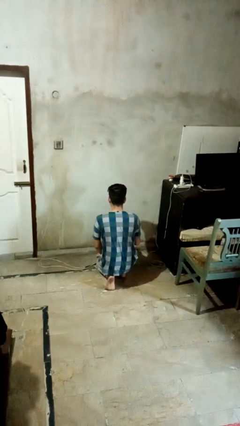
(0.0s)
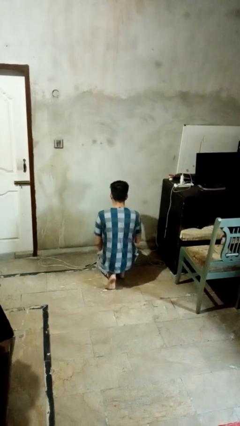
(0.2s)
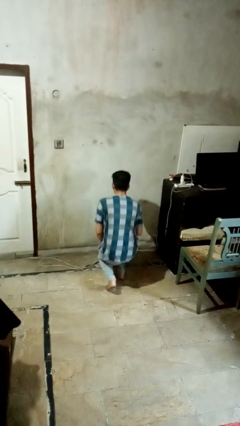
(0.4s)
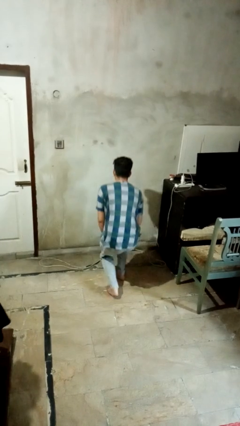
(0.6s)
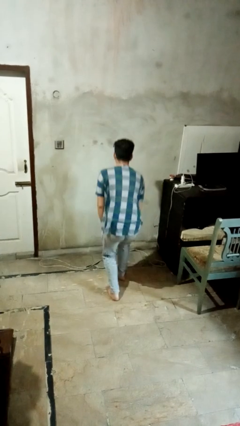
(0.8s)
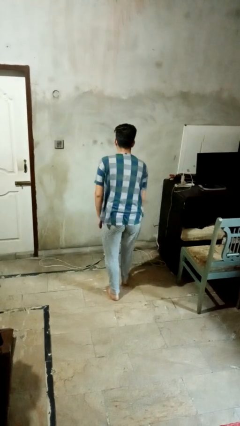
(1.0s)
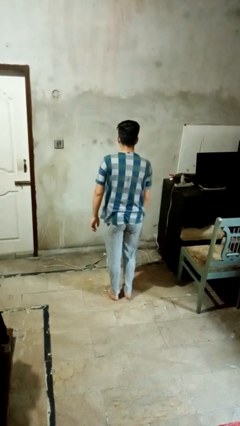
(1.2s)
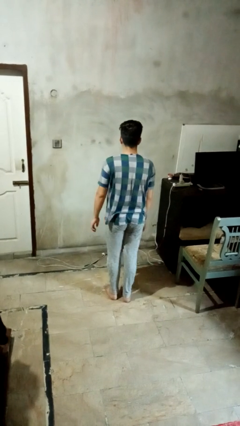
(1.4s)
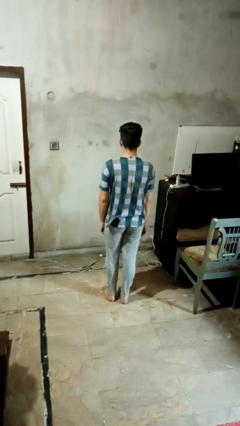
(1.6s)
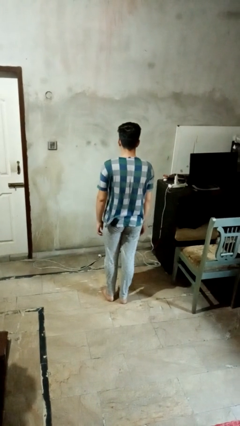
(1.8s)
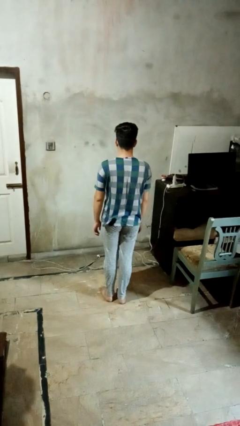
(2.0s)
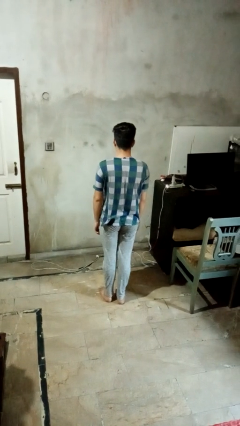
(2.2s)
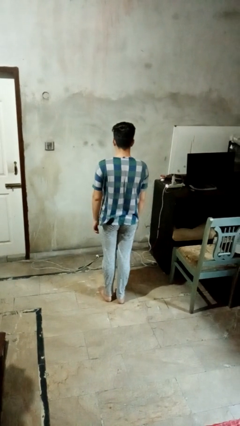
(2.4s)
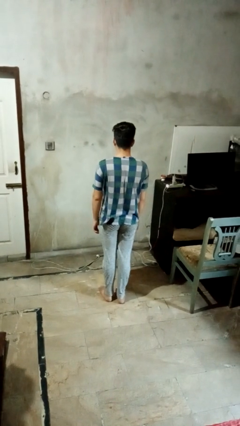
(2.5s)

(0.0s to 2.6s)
person stands up from floor

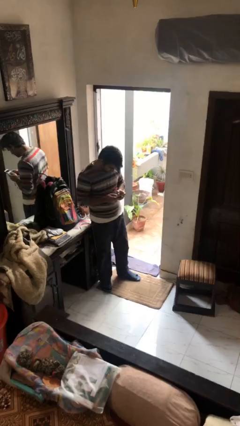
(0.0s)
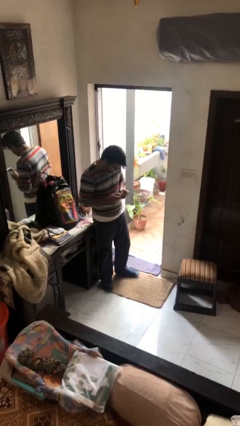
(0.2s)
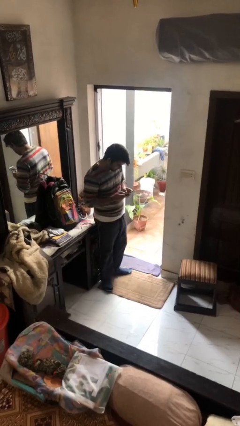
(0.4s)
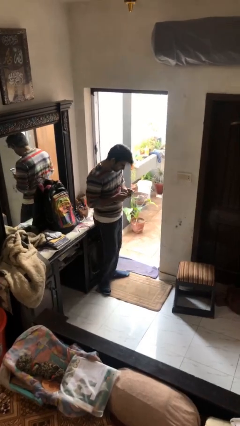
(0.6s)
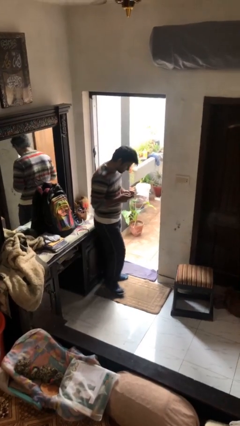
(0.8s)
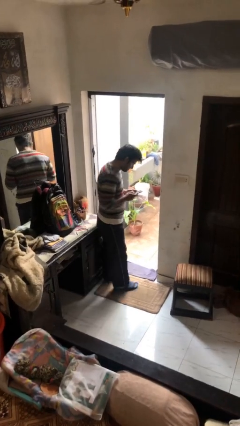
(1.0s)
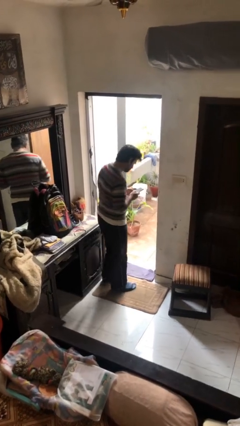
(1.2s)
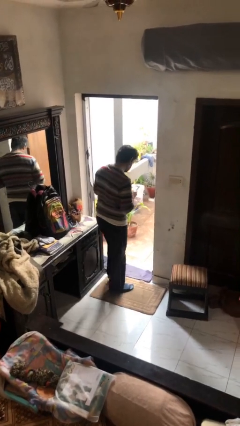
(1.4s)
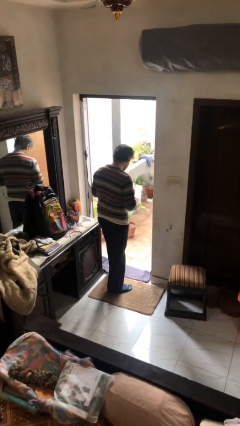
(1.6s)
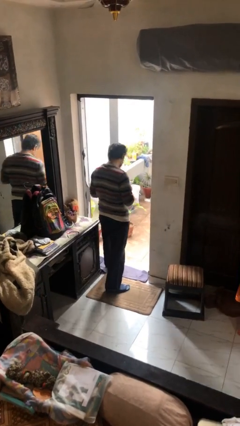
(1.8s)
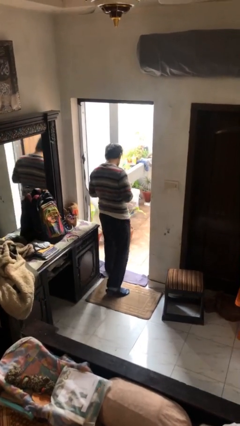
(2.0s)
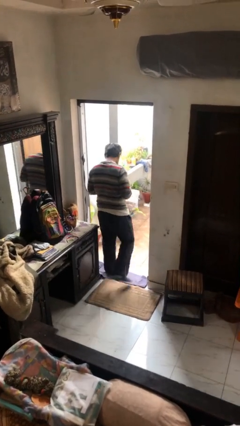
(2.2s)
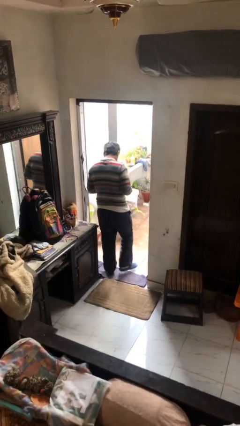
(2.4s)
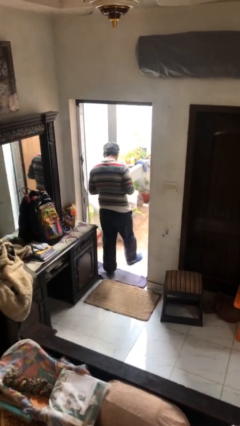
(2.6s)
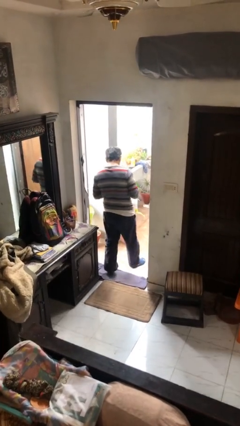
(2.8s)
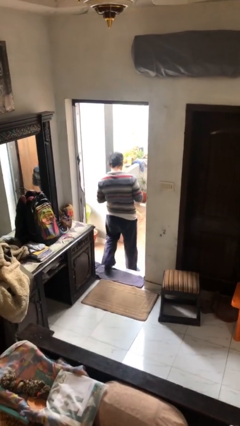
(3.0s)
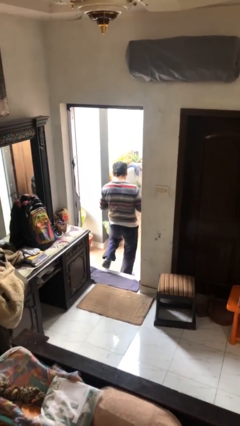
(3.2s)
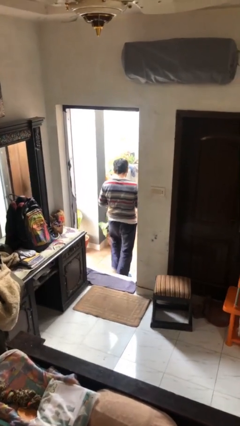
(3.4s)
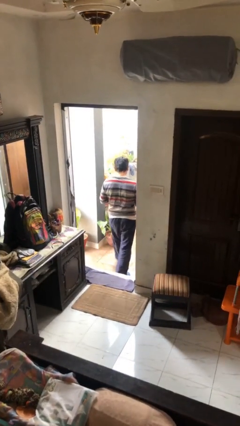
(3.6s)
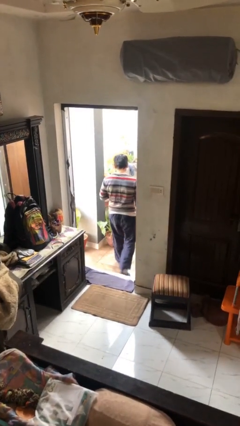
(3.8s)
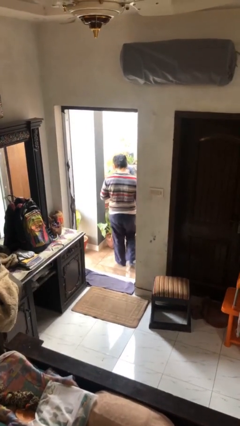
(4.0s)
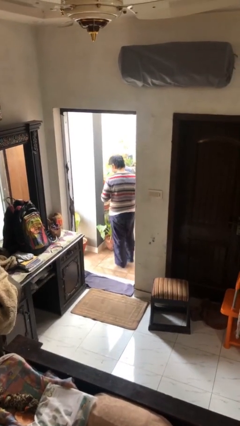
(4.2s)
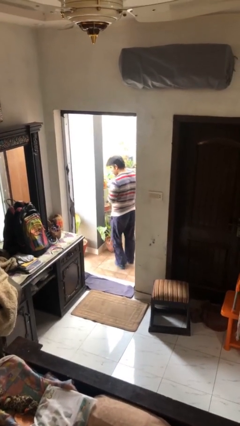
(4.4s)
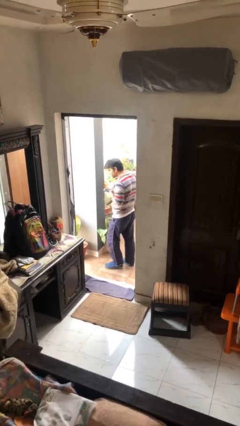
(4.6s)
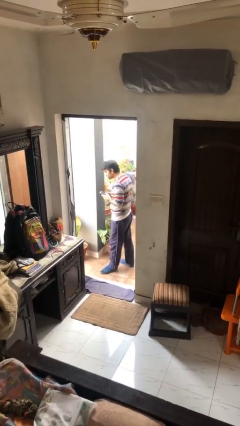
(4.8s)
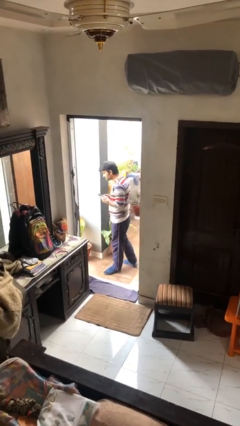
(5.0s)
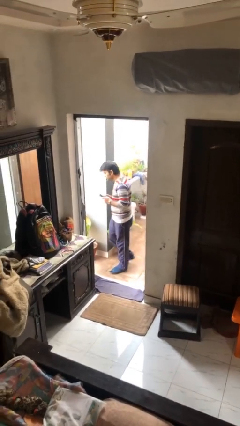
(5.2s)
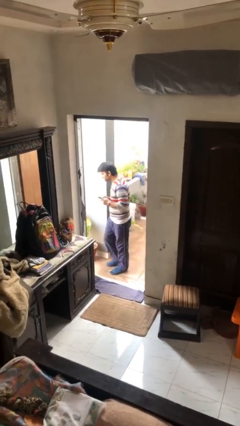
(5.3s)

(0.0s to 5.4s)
person exits scene through structure

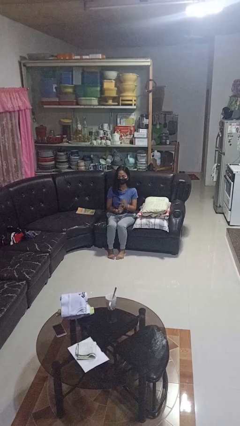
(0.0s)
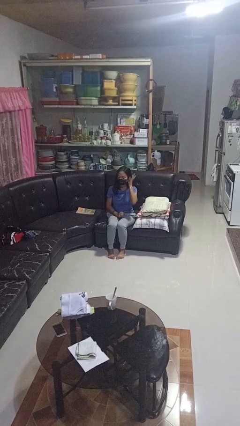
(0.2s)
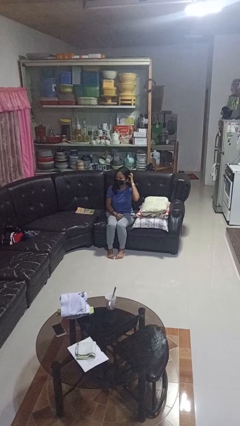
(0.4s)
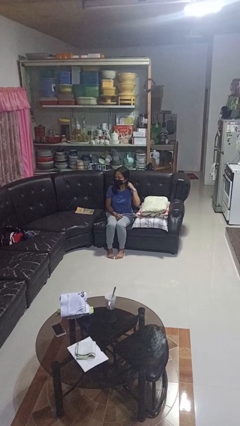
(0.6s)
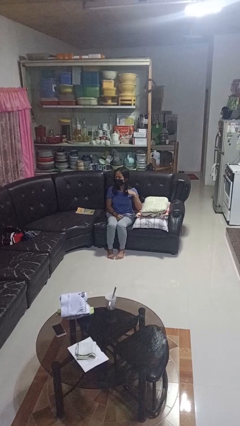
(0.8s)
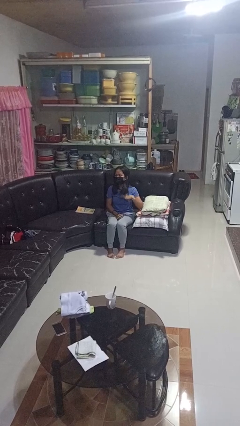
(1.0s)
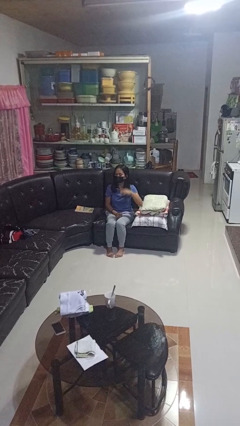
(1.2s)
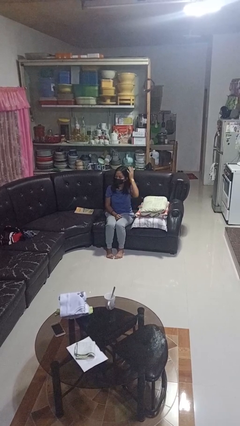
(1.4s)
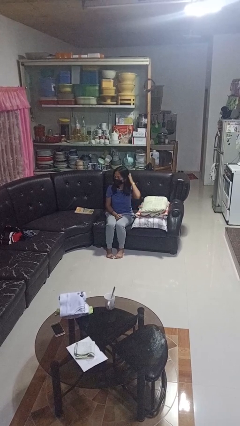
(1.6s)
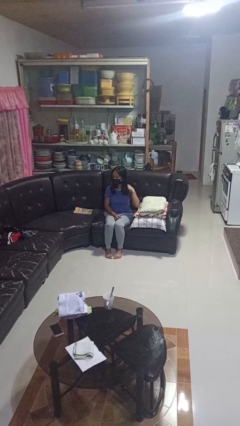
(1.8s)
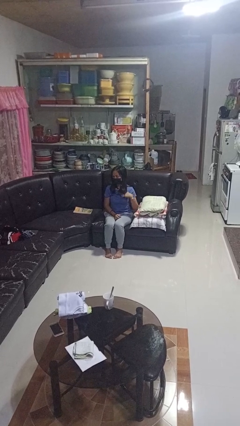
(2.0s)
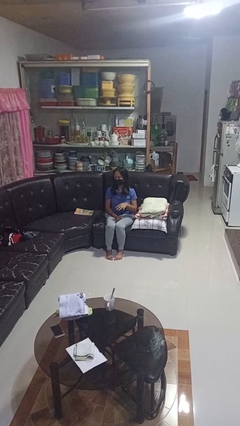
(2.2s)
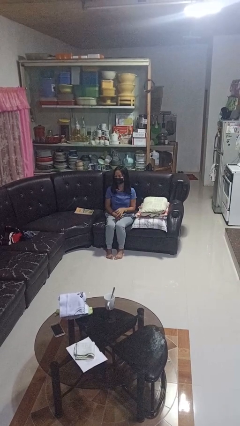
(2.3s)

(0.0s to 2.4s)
person strokes hair

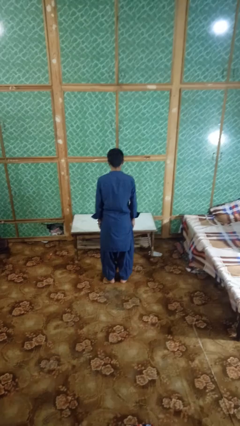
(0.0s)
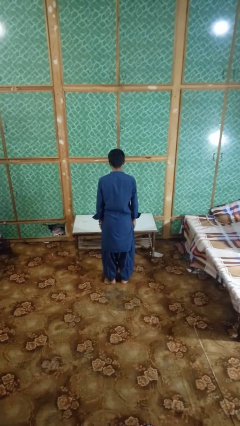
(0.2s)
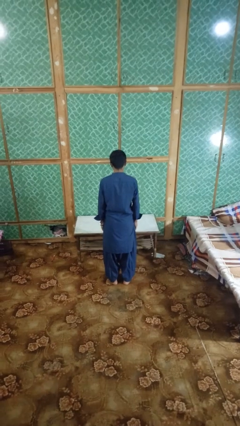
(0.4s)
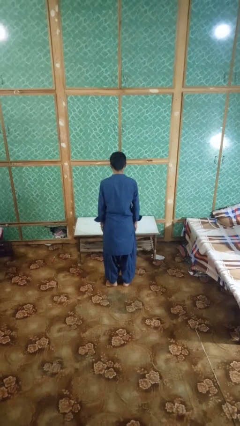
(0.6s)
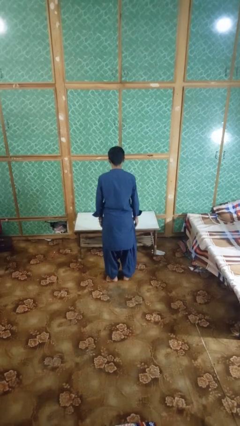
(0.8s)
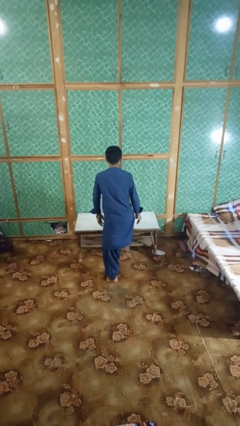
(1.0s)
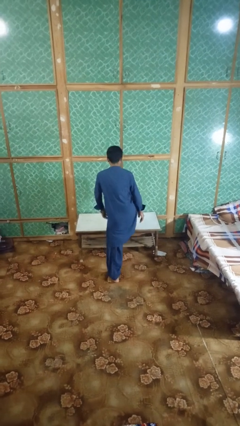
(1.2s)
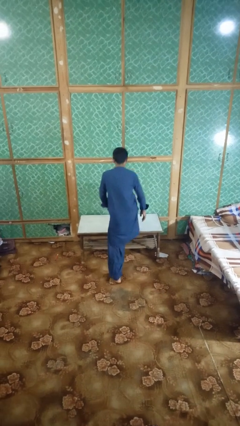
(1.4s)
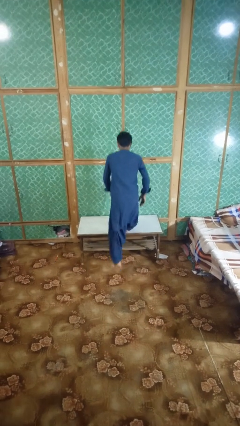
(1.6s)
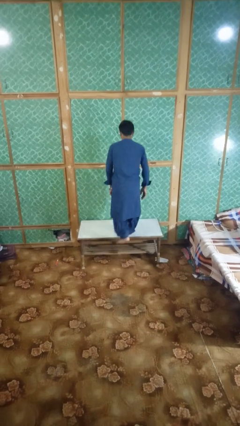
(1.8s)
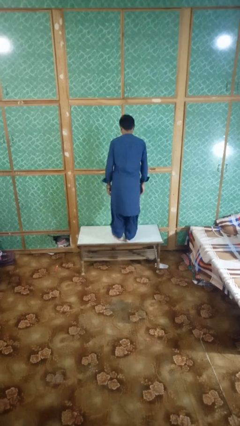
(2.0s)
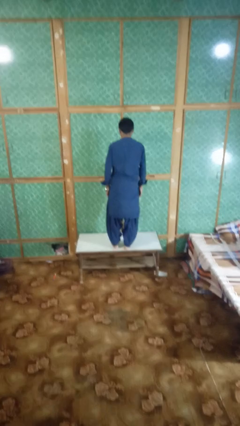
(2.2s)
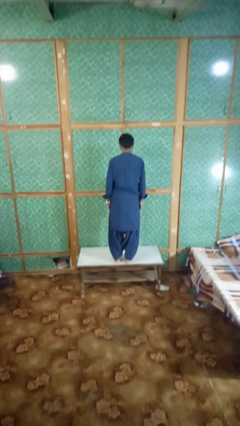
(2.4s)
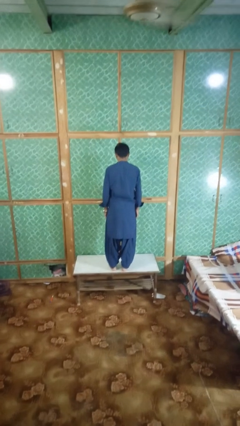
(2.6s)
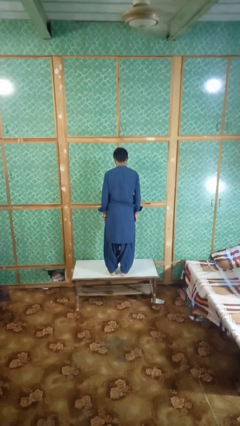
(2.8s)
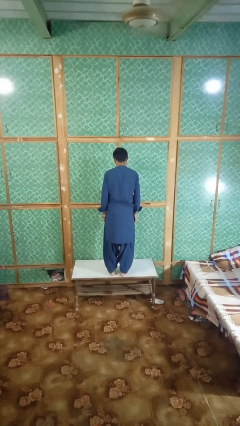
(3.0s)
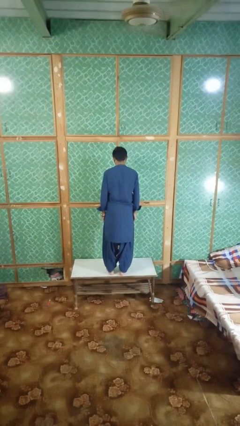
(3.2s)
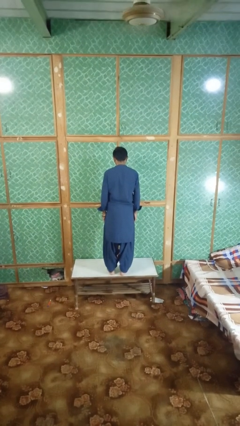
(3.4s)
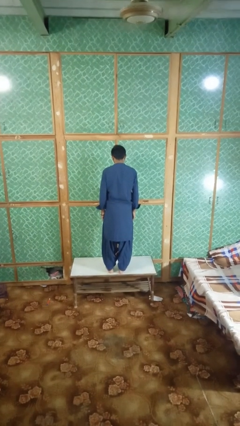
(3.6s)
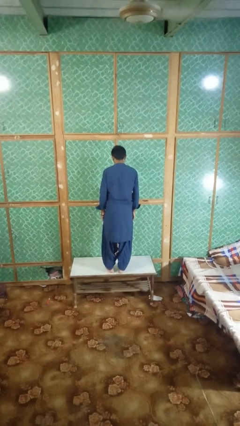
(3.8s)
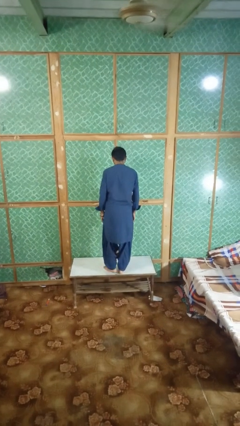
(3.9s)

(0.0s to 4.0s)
person climbs on table

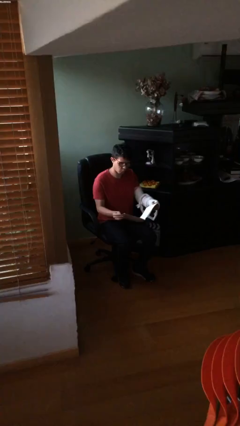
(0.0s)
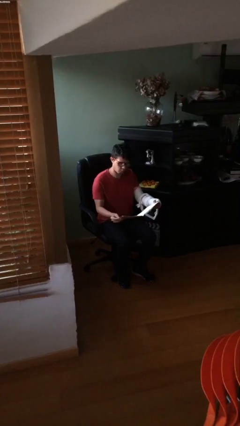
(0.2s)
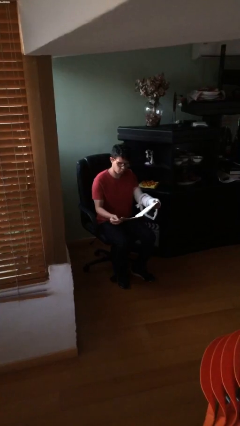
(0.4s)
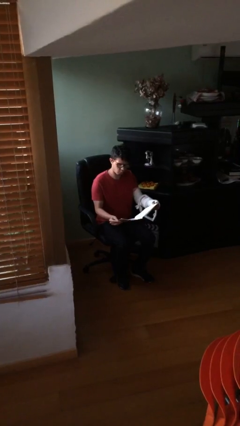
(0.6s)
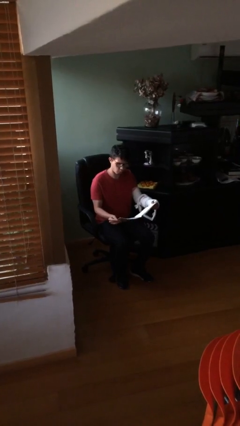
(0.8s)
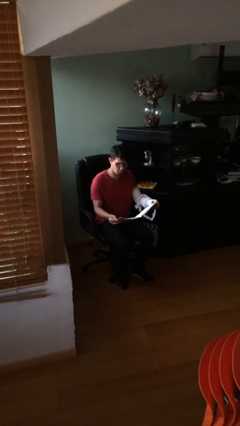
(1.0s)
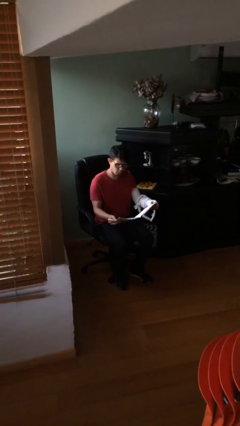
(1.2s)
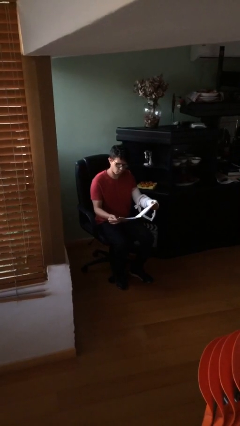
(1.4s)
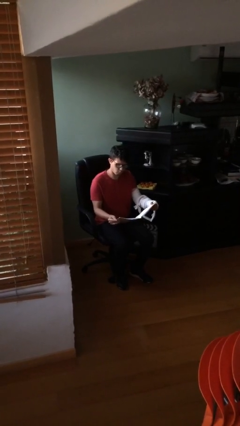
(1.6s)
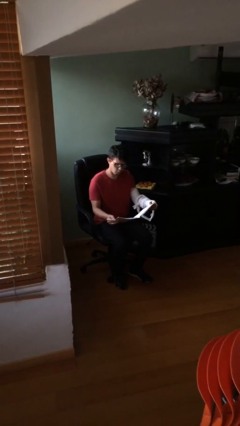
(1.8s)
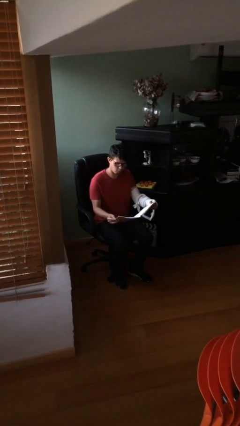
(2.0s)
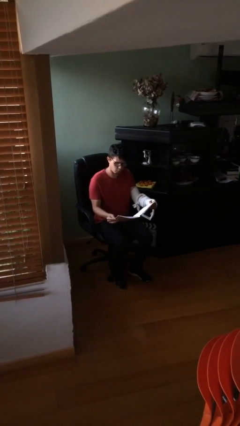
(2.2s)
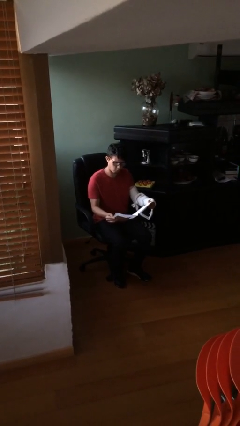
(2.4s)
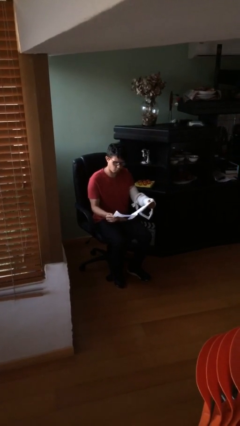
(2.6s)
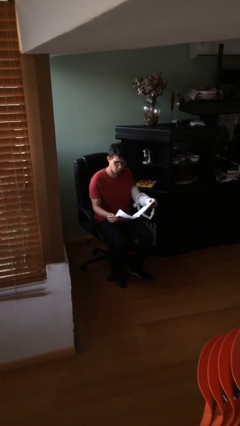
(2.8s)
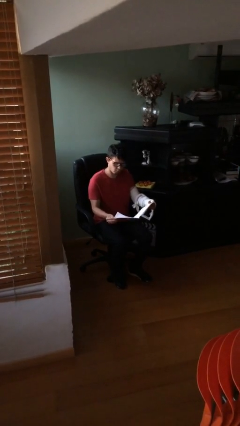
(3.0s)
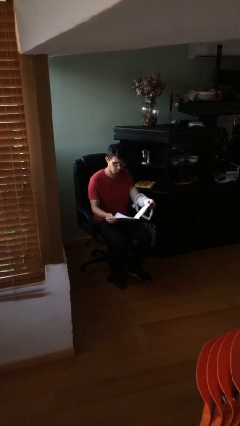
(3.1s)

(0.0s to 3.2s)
person reads document
